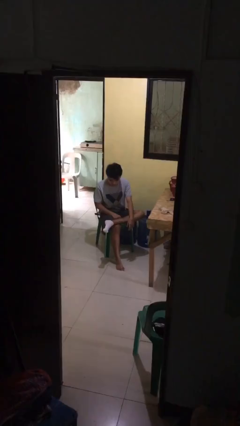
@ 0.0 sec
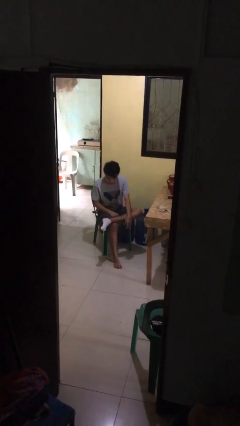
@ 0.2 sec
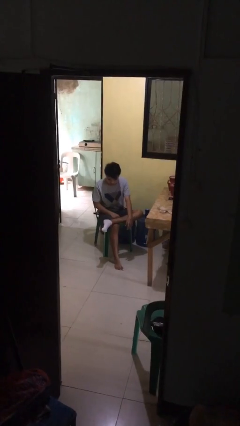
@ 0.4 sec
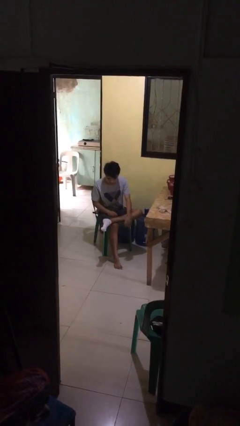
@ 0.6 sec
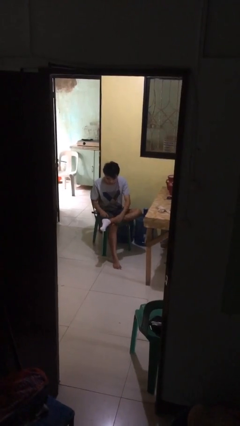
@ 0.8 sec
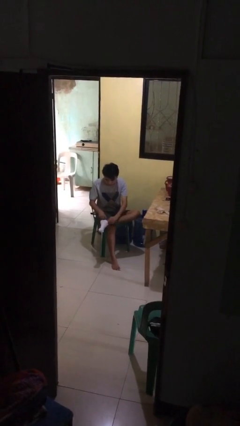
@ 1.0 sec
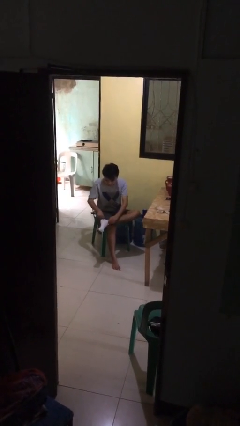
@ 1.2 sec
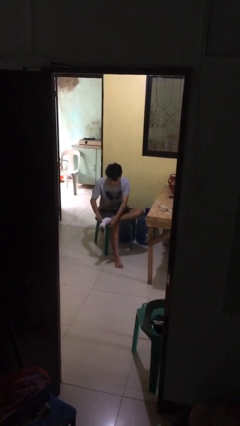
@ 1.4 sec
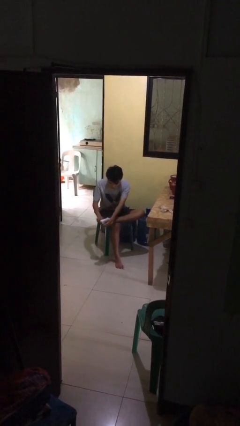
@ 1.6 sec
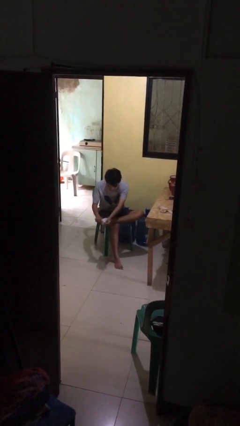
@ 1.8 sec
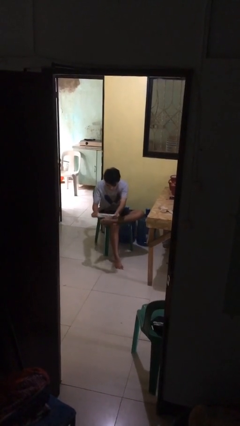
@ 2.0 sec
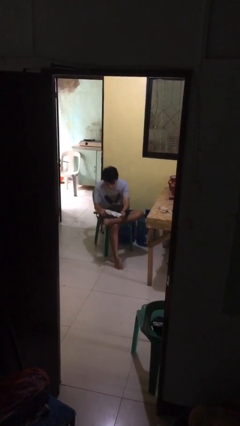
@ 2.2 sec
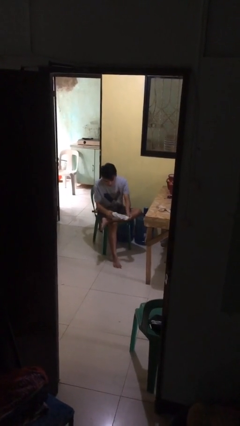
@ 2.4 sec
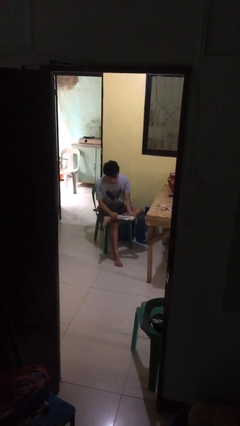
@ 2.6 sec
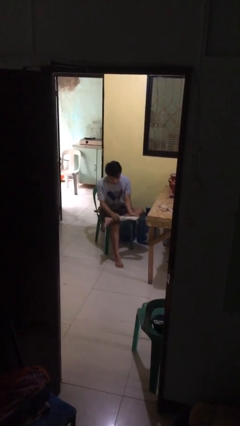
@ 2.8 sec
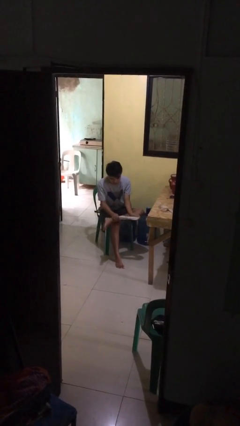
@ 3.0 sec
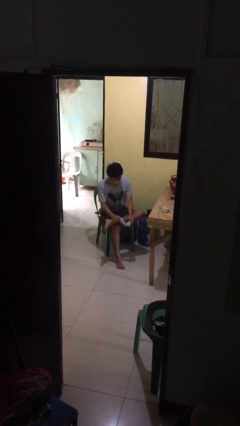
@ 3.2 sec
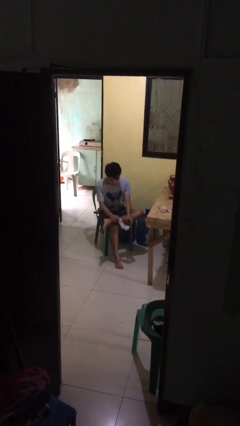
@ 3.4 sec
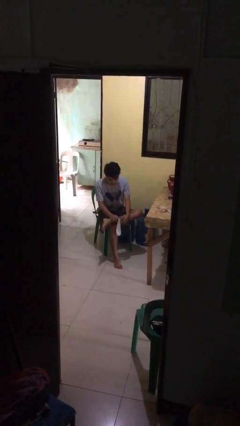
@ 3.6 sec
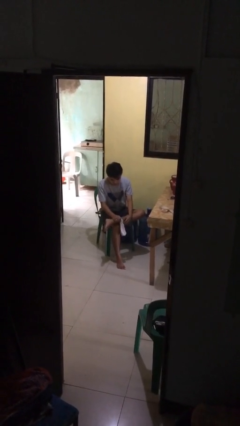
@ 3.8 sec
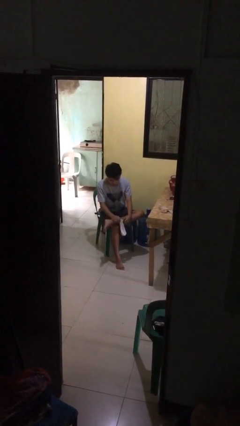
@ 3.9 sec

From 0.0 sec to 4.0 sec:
person takes off socks

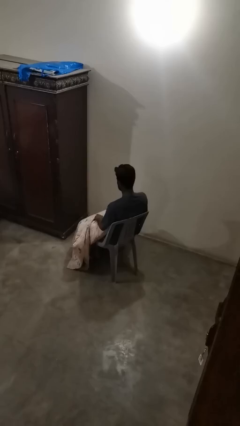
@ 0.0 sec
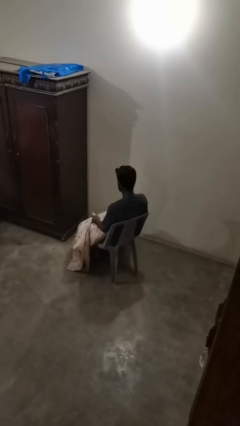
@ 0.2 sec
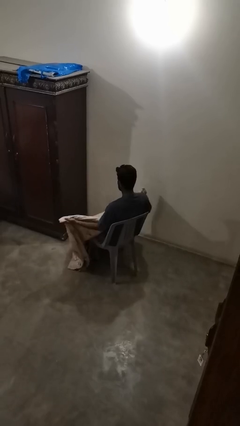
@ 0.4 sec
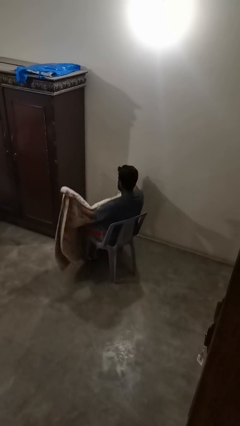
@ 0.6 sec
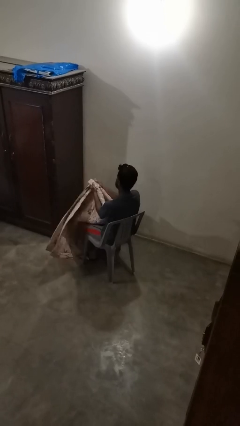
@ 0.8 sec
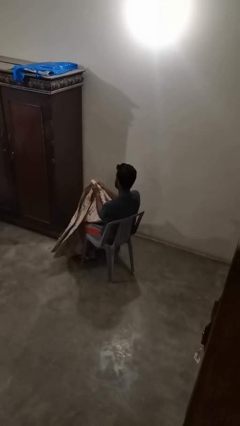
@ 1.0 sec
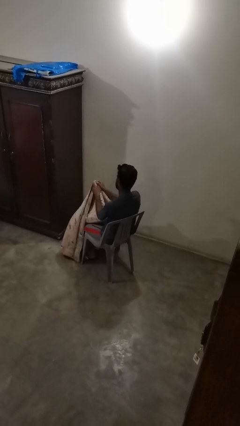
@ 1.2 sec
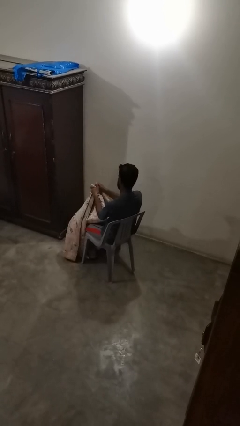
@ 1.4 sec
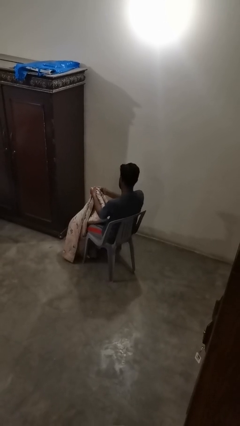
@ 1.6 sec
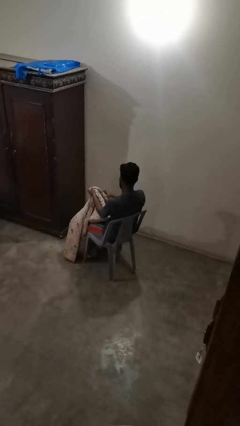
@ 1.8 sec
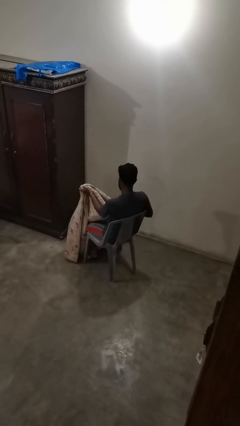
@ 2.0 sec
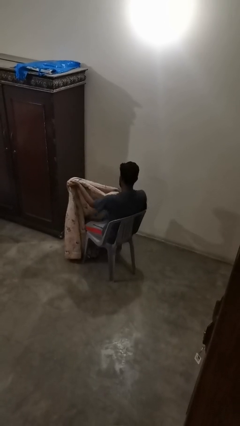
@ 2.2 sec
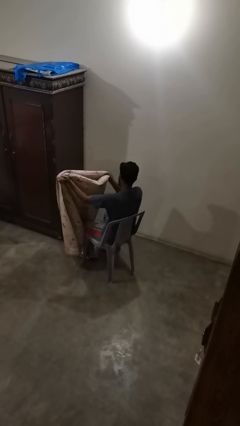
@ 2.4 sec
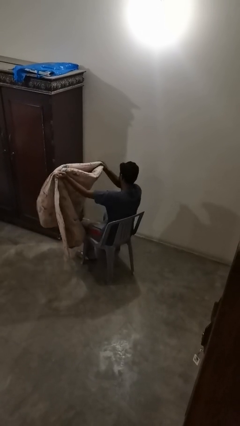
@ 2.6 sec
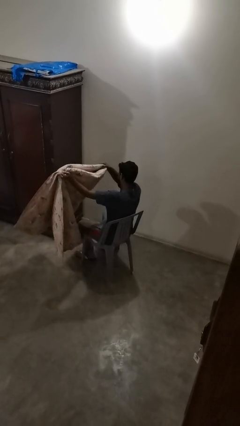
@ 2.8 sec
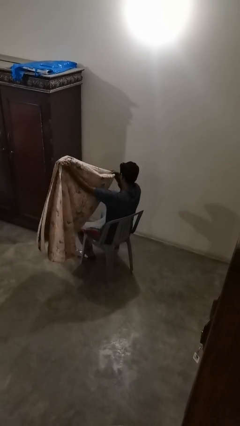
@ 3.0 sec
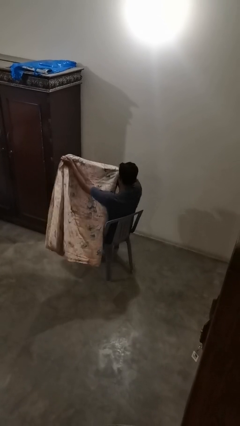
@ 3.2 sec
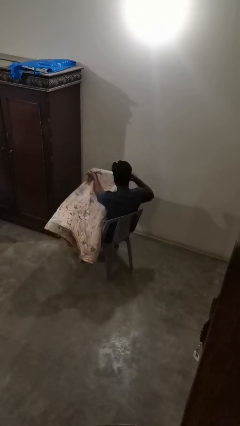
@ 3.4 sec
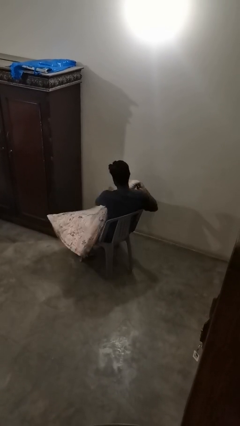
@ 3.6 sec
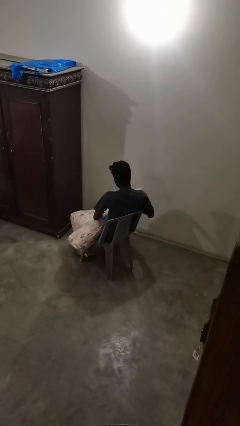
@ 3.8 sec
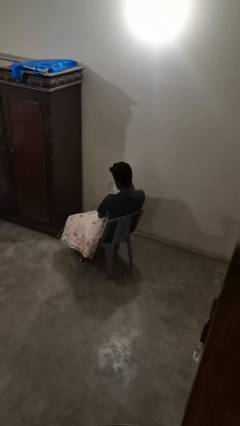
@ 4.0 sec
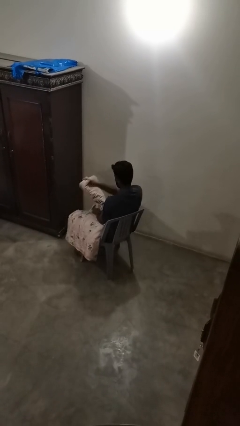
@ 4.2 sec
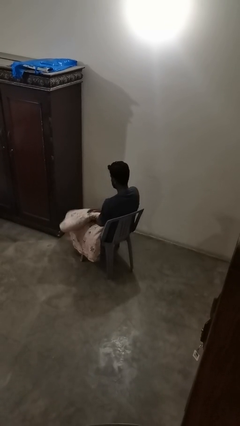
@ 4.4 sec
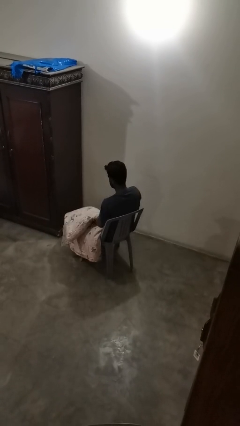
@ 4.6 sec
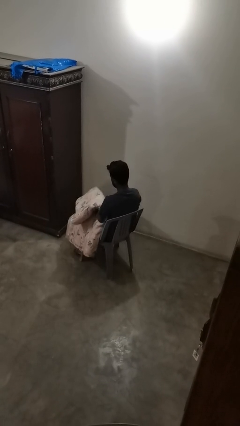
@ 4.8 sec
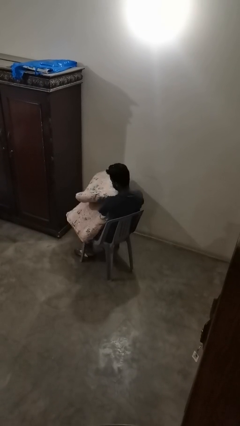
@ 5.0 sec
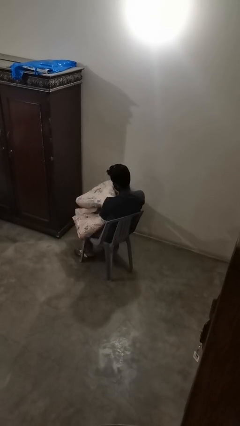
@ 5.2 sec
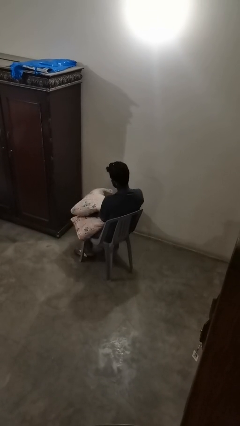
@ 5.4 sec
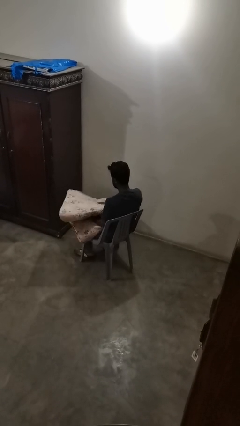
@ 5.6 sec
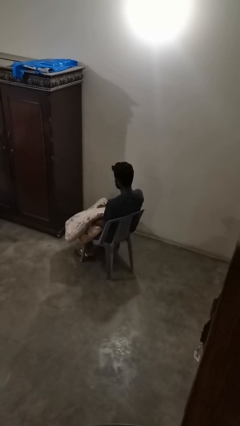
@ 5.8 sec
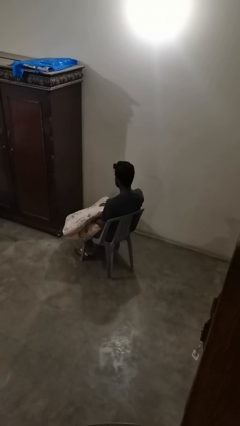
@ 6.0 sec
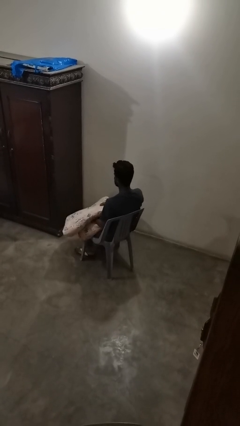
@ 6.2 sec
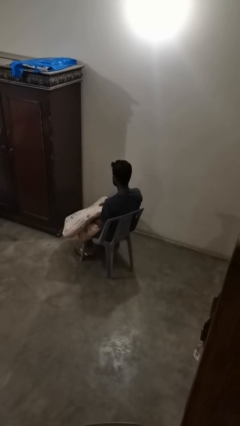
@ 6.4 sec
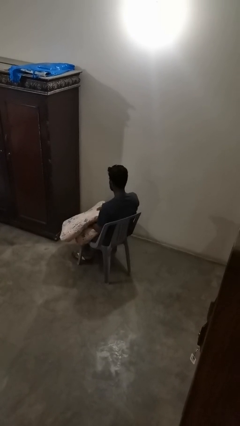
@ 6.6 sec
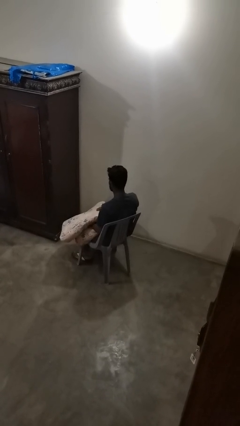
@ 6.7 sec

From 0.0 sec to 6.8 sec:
person folds blanket

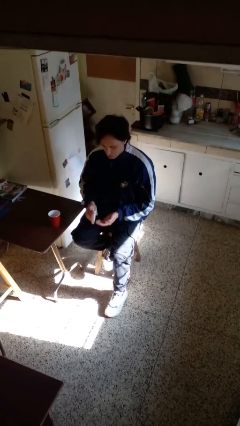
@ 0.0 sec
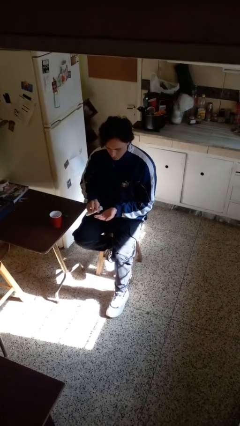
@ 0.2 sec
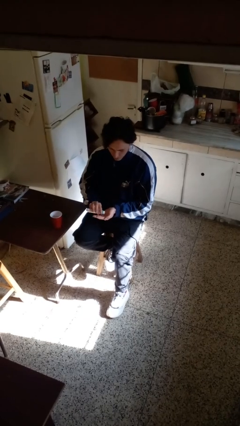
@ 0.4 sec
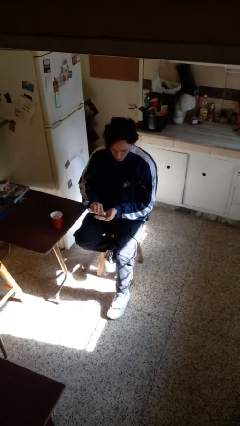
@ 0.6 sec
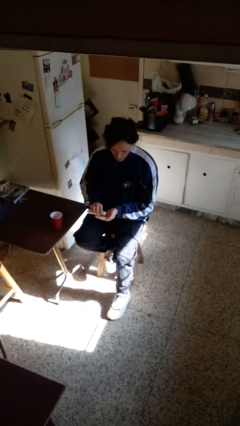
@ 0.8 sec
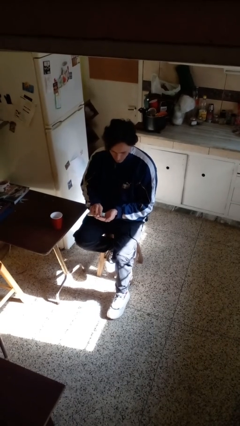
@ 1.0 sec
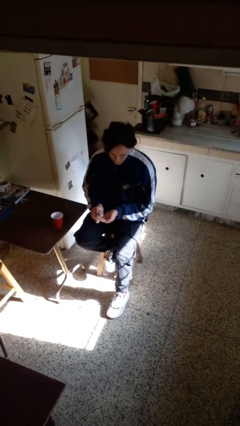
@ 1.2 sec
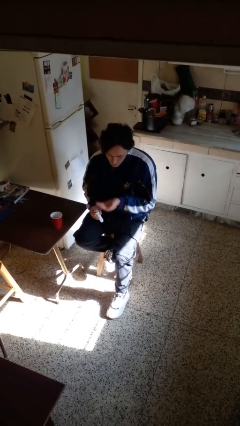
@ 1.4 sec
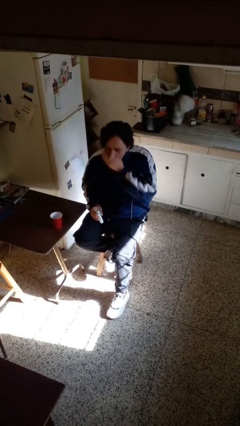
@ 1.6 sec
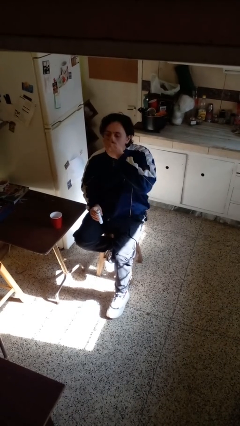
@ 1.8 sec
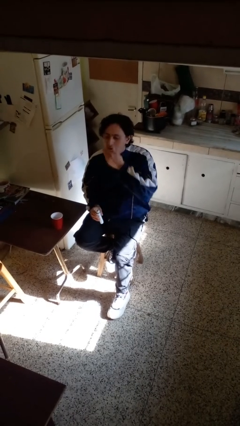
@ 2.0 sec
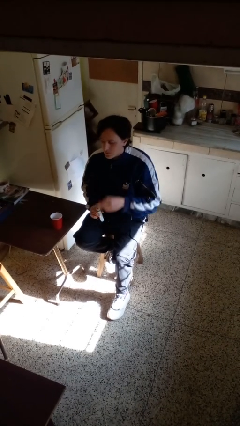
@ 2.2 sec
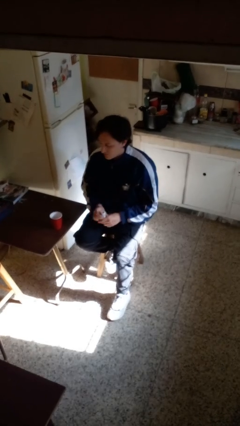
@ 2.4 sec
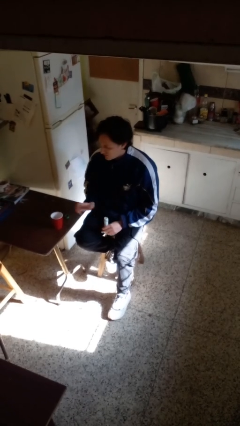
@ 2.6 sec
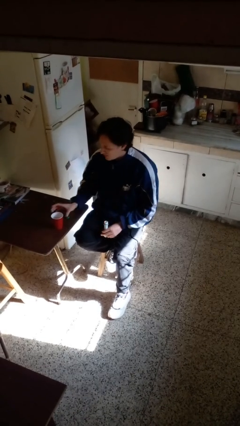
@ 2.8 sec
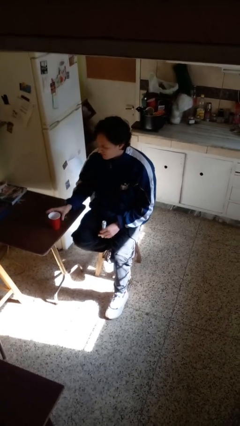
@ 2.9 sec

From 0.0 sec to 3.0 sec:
person takes medicine pills

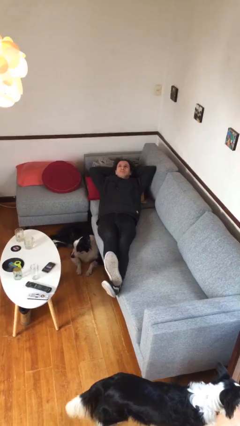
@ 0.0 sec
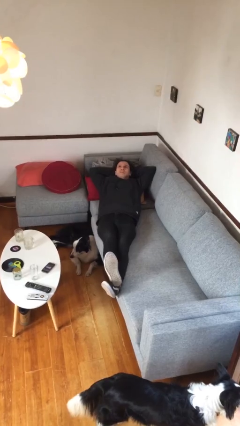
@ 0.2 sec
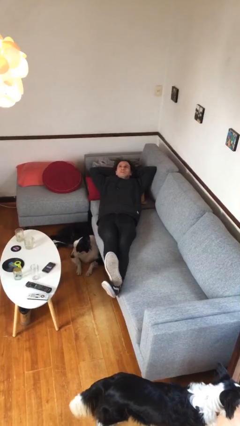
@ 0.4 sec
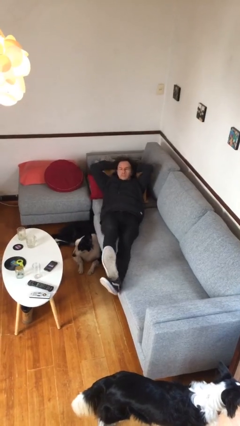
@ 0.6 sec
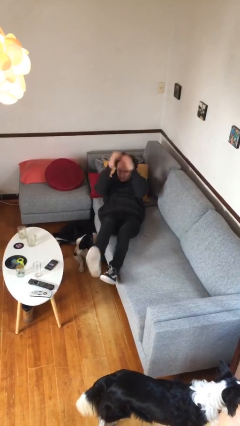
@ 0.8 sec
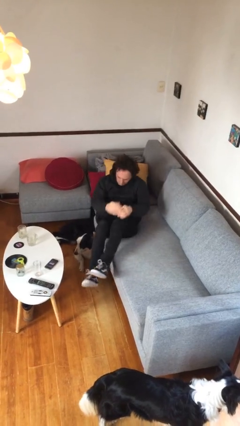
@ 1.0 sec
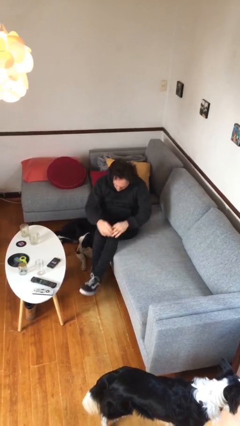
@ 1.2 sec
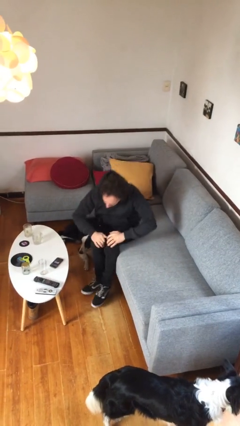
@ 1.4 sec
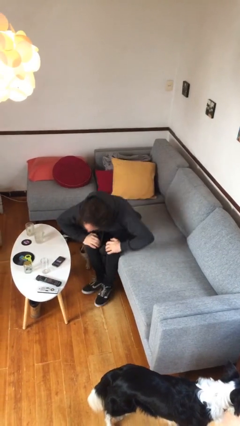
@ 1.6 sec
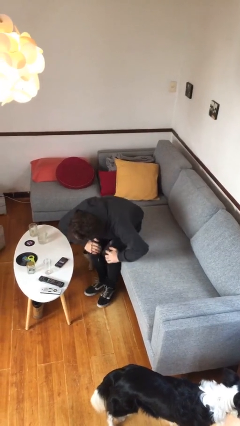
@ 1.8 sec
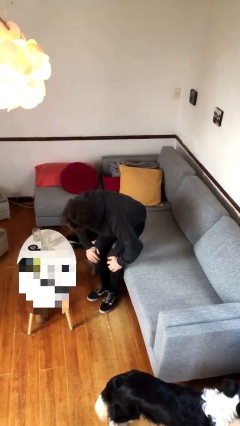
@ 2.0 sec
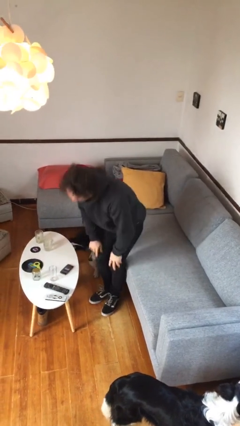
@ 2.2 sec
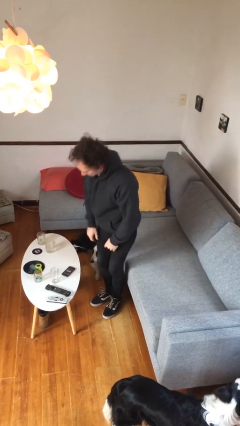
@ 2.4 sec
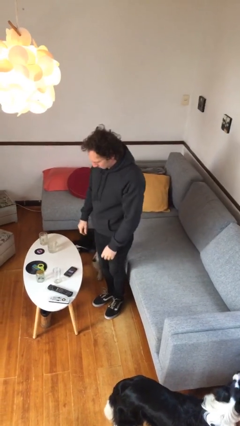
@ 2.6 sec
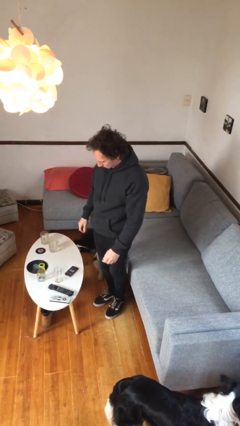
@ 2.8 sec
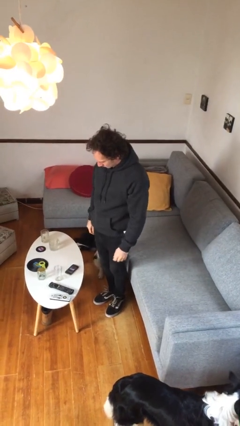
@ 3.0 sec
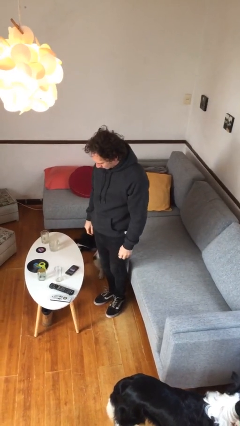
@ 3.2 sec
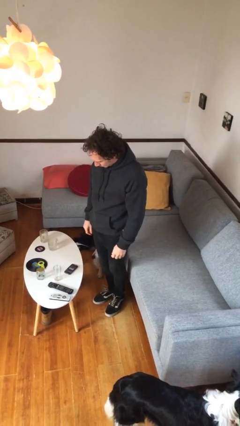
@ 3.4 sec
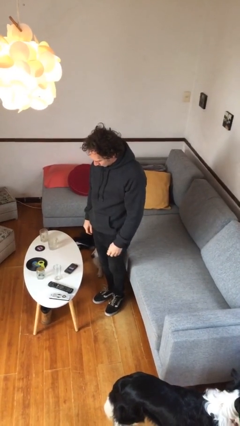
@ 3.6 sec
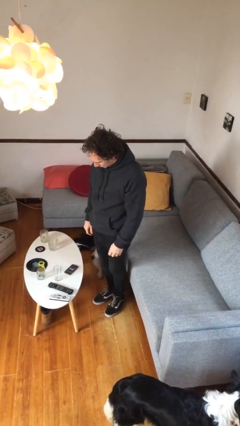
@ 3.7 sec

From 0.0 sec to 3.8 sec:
person stands up
